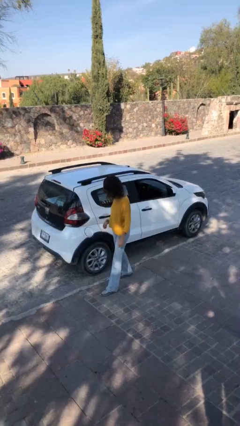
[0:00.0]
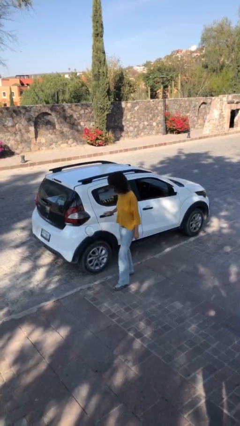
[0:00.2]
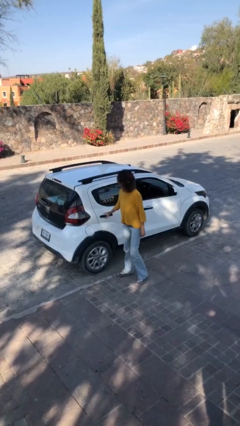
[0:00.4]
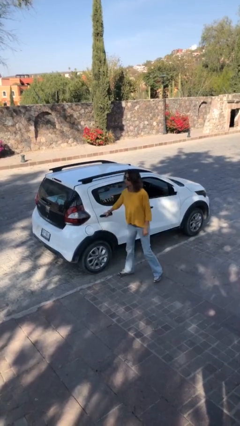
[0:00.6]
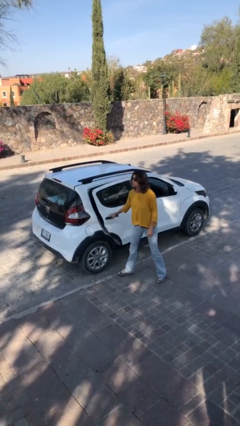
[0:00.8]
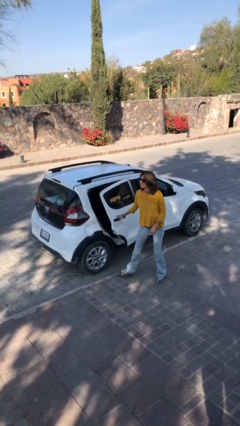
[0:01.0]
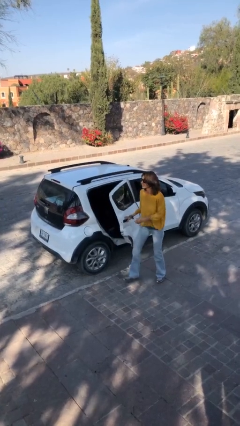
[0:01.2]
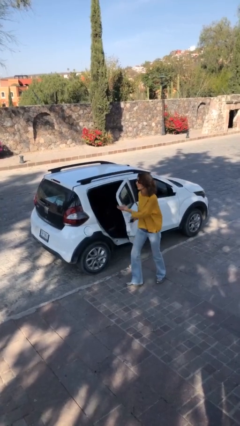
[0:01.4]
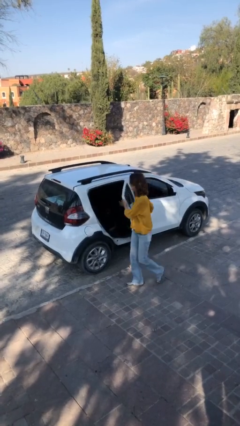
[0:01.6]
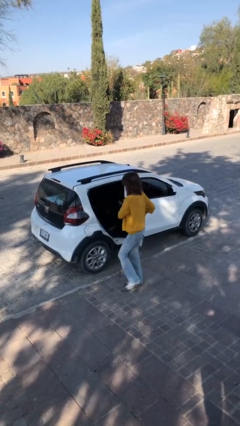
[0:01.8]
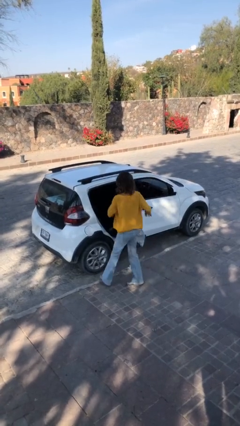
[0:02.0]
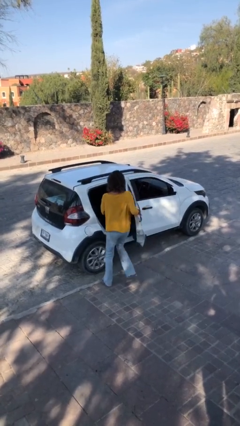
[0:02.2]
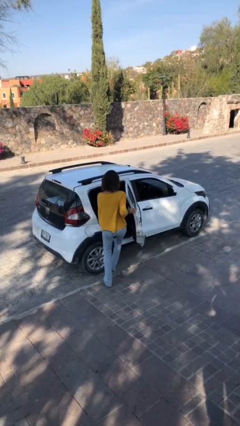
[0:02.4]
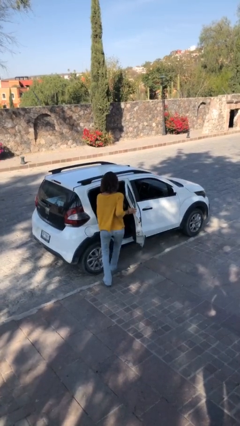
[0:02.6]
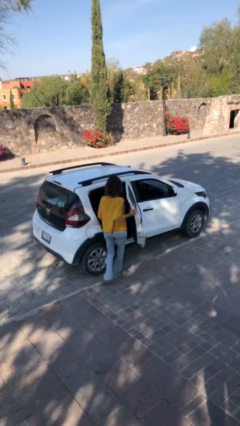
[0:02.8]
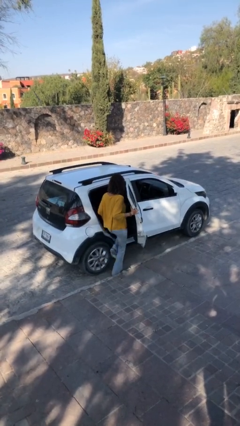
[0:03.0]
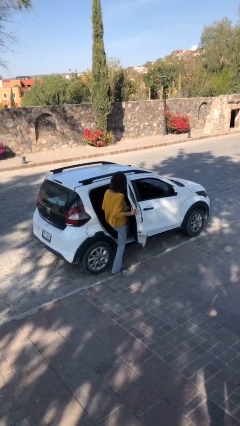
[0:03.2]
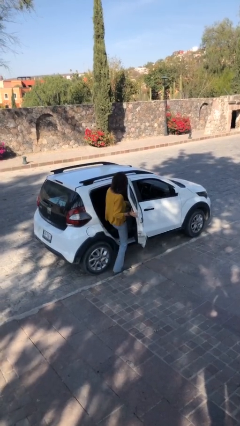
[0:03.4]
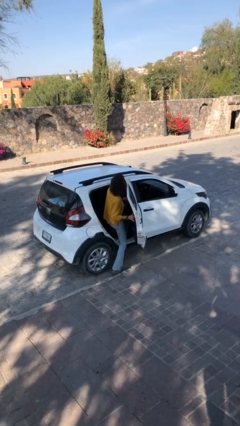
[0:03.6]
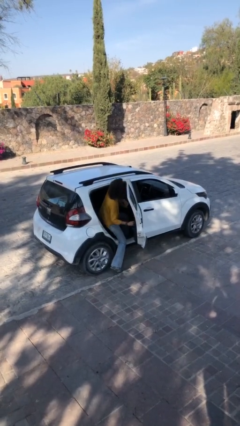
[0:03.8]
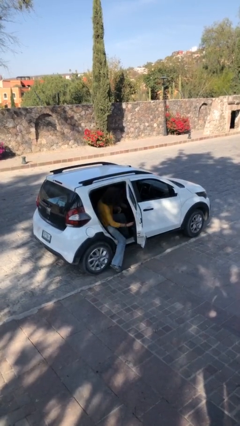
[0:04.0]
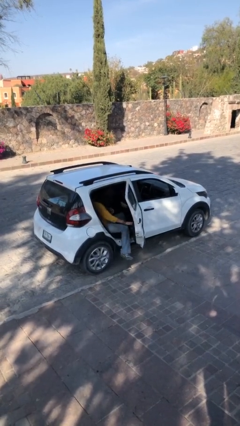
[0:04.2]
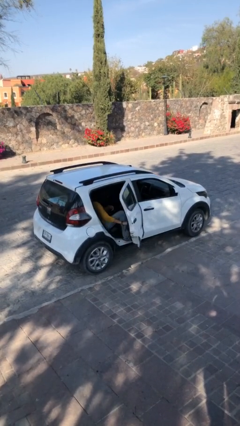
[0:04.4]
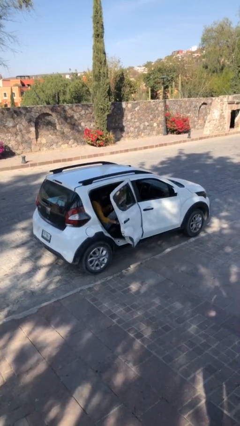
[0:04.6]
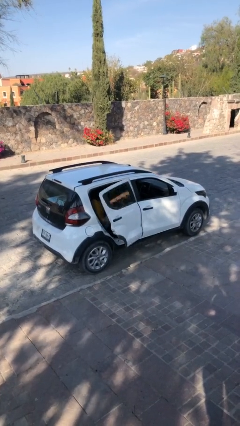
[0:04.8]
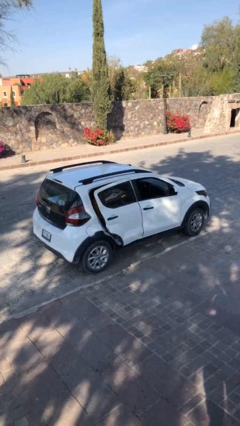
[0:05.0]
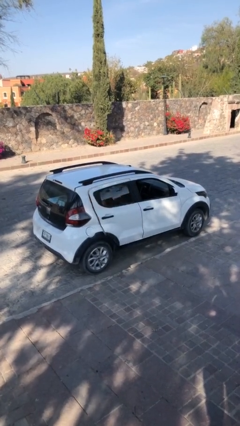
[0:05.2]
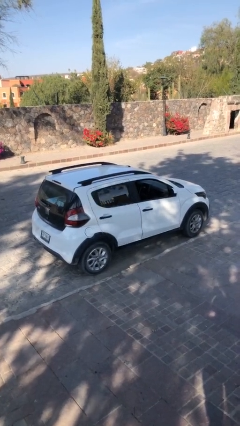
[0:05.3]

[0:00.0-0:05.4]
car picks up person

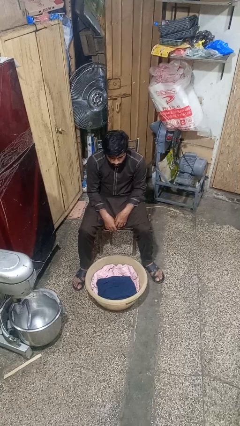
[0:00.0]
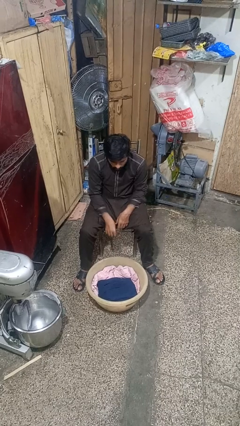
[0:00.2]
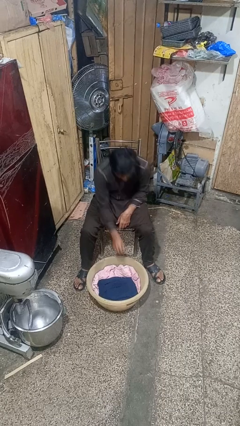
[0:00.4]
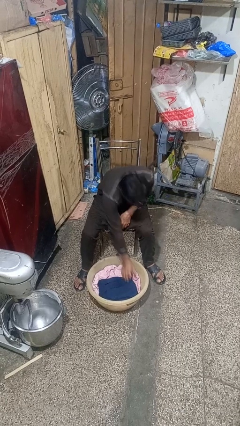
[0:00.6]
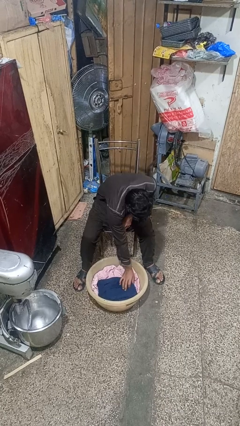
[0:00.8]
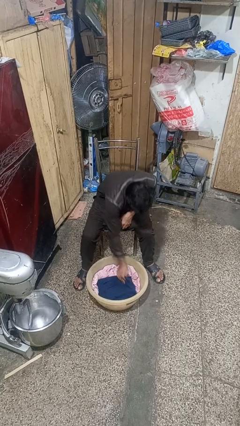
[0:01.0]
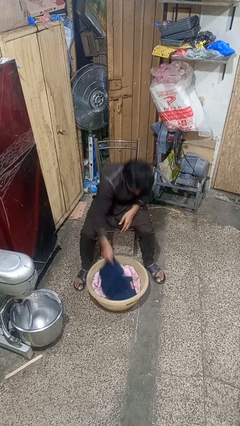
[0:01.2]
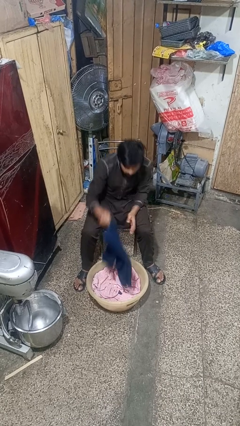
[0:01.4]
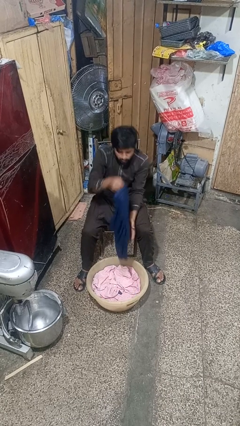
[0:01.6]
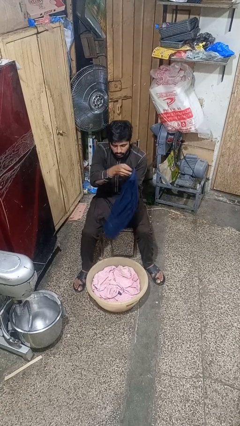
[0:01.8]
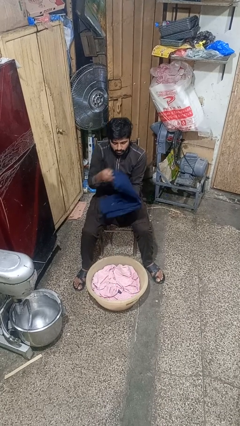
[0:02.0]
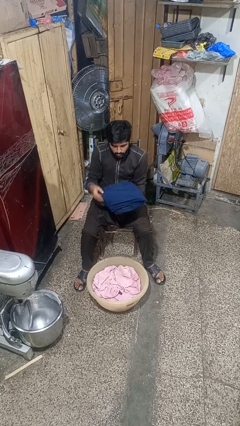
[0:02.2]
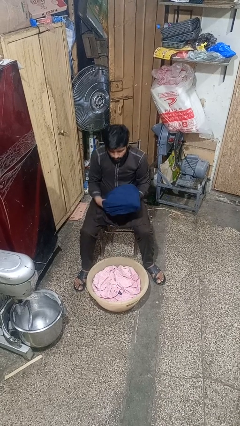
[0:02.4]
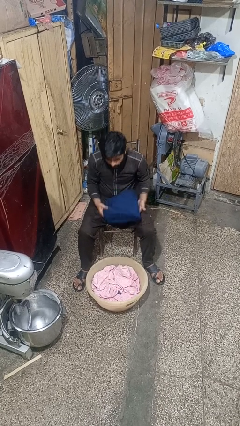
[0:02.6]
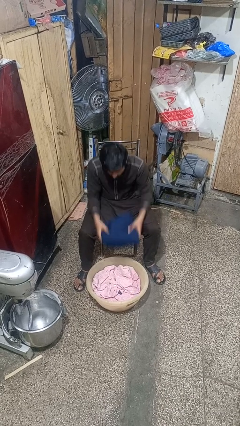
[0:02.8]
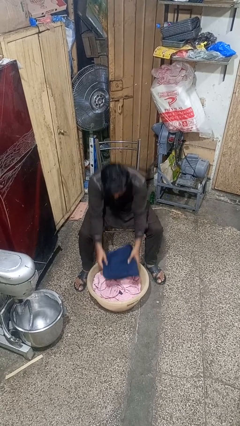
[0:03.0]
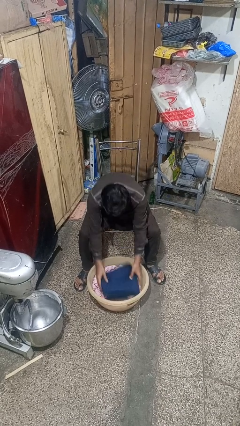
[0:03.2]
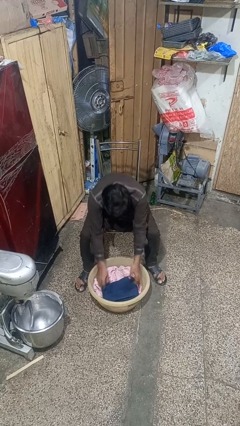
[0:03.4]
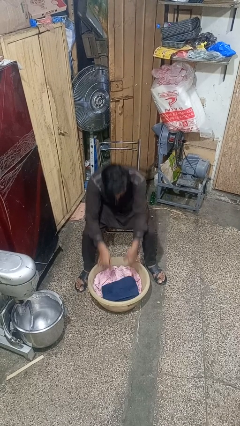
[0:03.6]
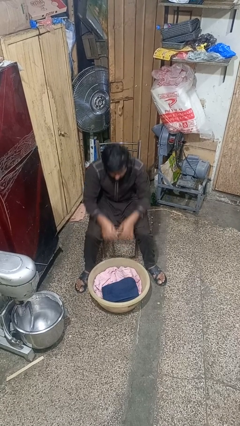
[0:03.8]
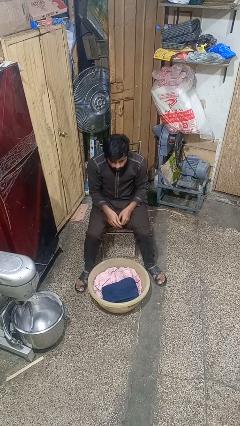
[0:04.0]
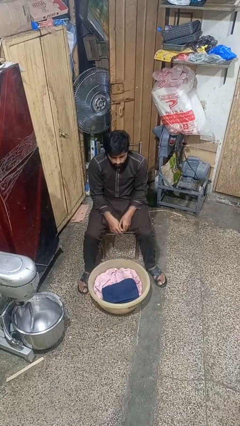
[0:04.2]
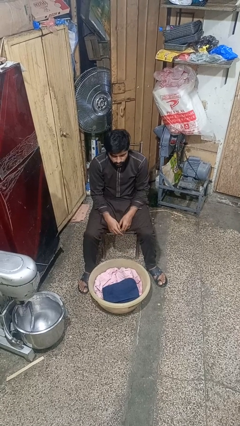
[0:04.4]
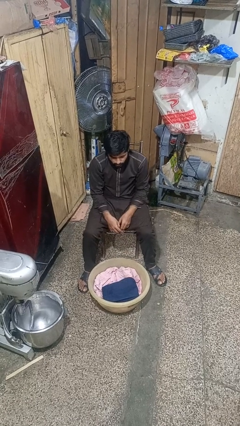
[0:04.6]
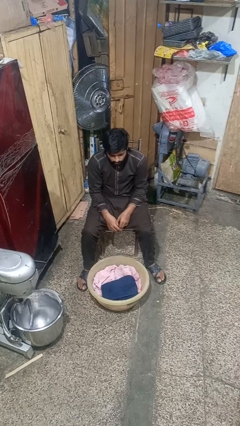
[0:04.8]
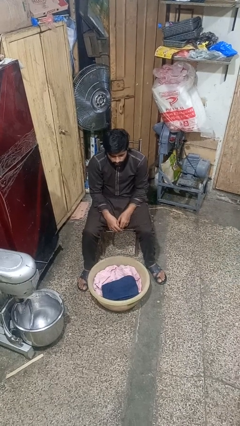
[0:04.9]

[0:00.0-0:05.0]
person folds pants

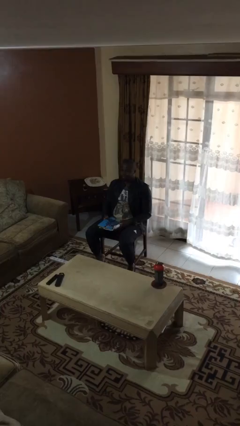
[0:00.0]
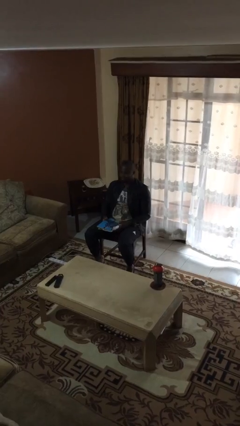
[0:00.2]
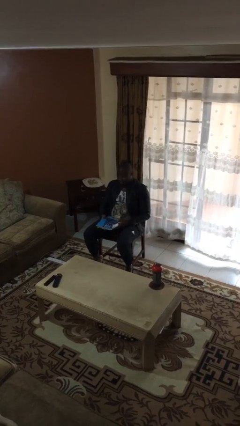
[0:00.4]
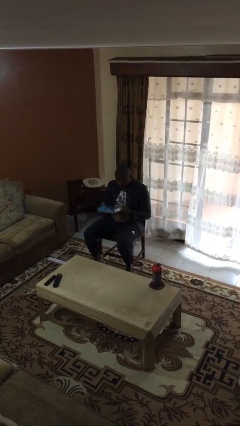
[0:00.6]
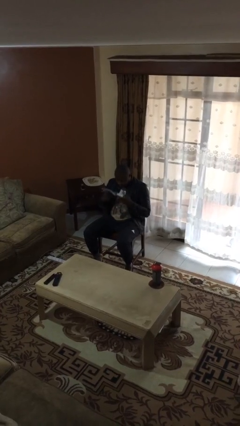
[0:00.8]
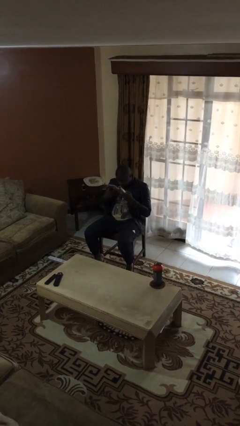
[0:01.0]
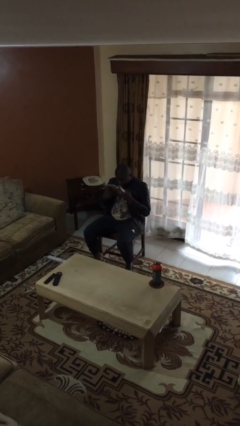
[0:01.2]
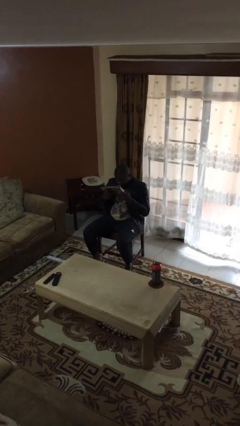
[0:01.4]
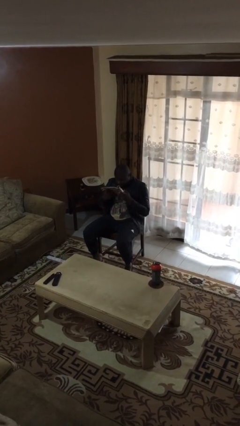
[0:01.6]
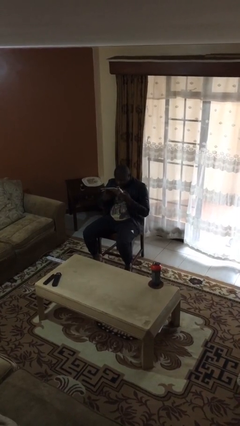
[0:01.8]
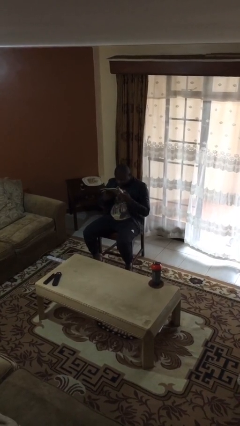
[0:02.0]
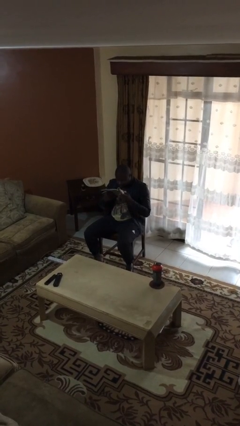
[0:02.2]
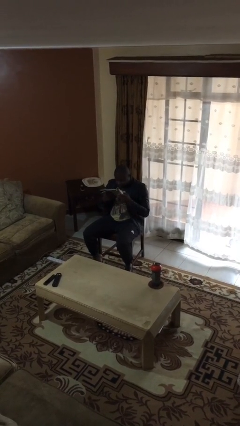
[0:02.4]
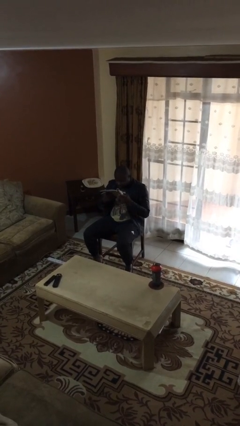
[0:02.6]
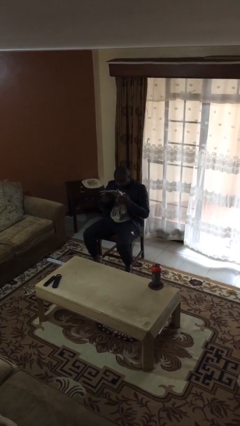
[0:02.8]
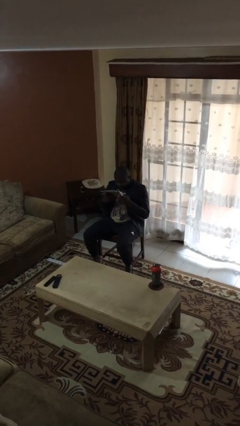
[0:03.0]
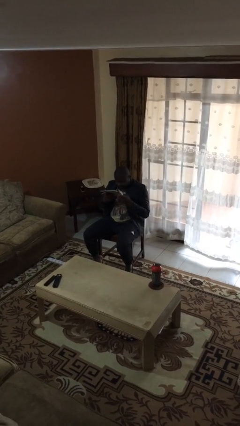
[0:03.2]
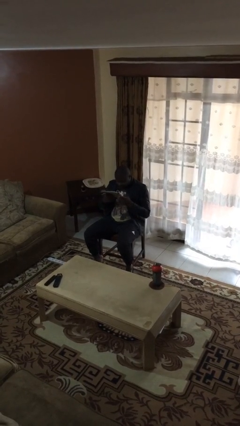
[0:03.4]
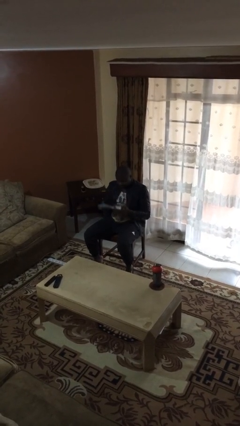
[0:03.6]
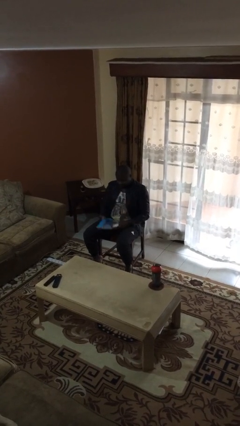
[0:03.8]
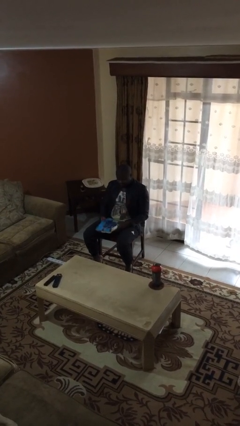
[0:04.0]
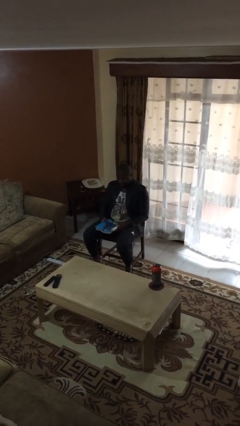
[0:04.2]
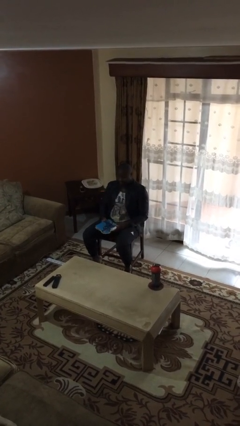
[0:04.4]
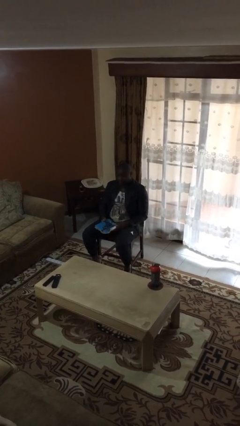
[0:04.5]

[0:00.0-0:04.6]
person reads document

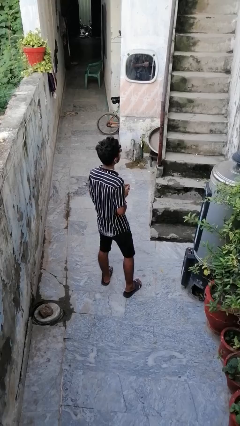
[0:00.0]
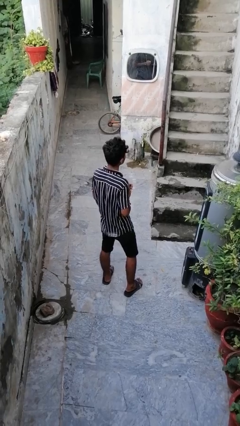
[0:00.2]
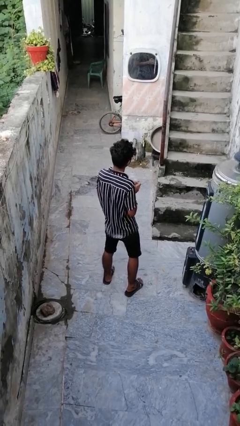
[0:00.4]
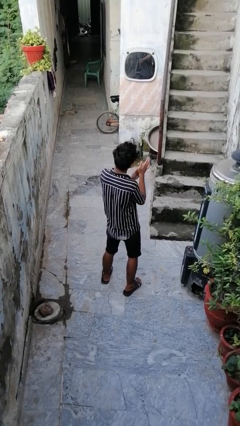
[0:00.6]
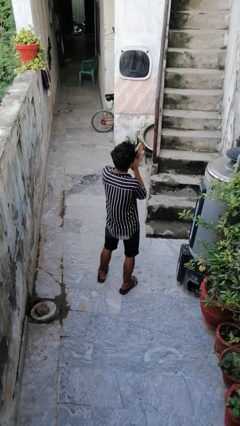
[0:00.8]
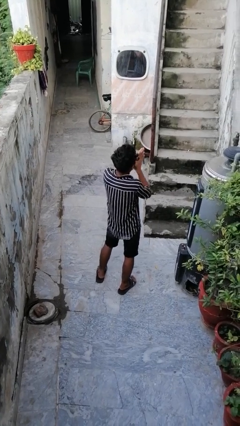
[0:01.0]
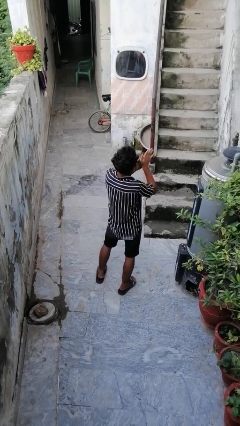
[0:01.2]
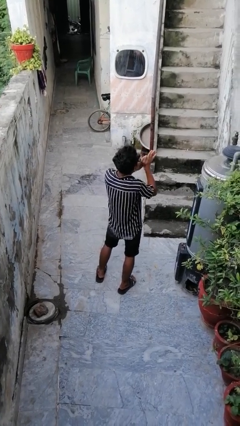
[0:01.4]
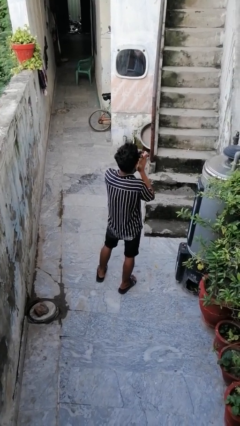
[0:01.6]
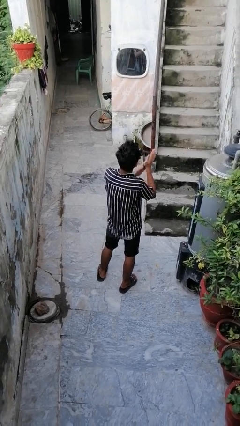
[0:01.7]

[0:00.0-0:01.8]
person blows into hands

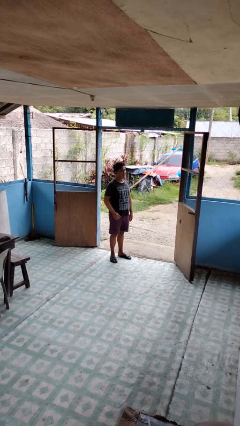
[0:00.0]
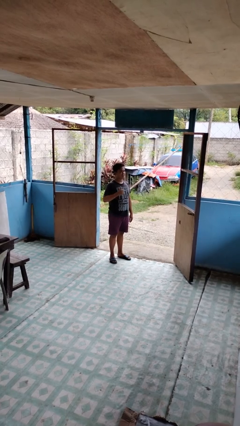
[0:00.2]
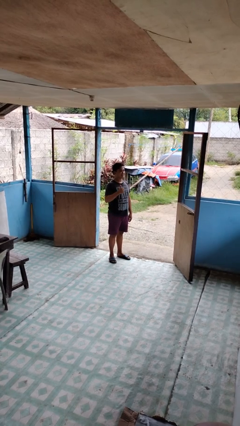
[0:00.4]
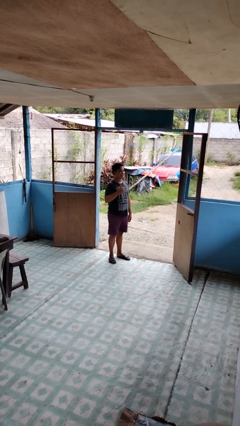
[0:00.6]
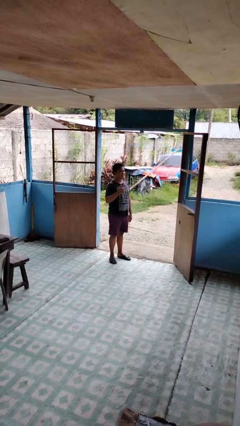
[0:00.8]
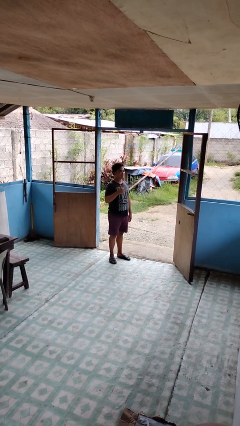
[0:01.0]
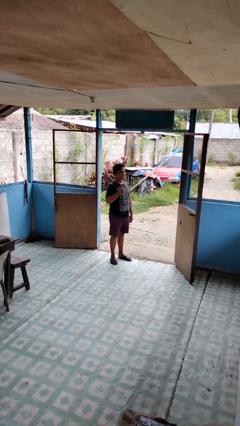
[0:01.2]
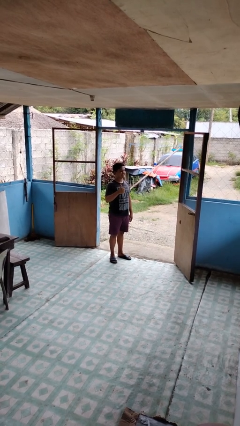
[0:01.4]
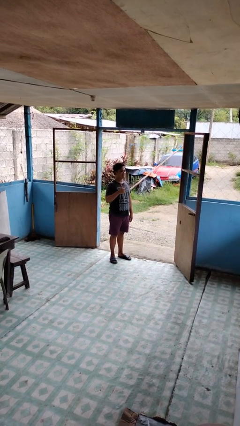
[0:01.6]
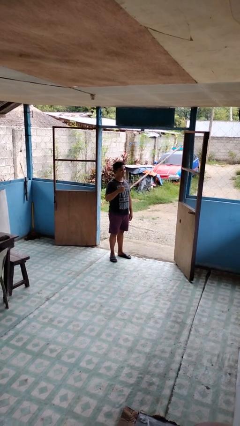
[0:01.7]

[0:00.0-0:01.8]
person gestures thumbs up
